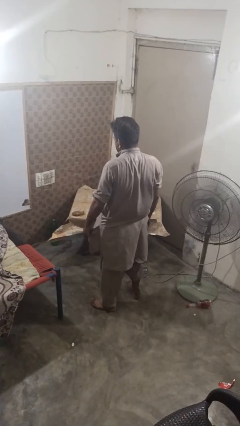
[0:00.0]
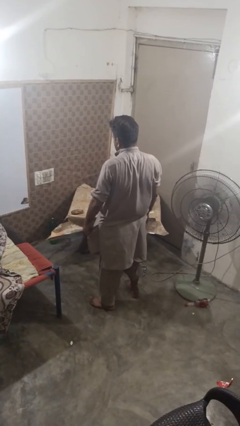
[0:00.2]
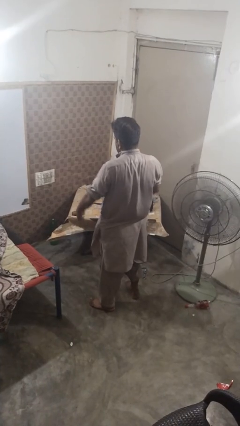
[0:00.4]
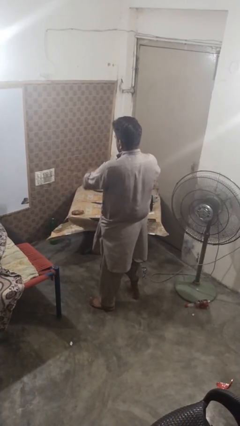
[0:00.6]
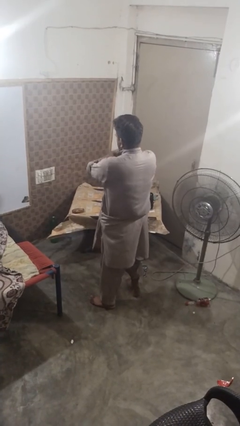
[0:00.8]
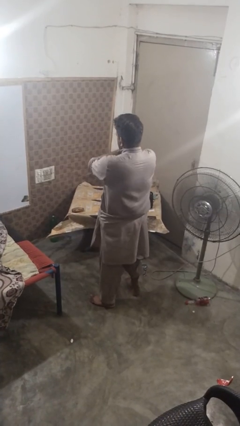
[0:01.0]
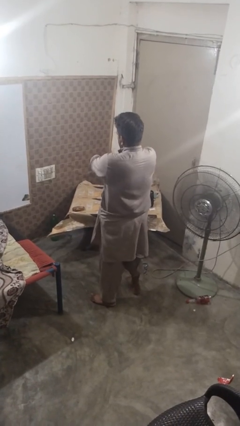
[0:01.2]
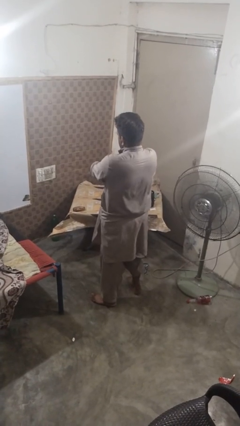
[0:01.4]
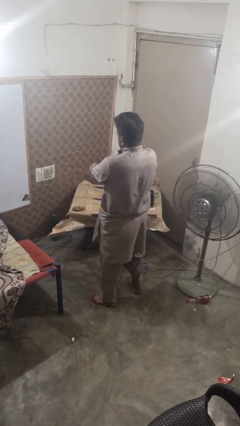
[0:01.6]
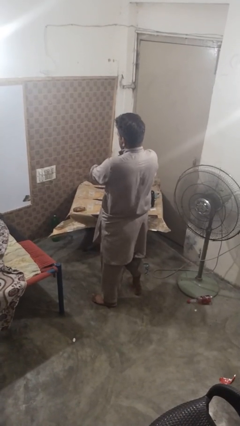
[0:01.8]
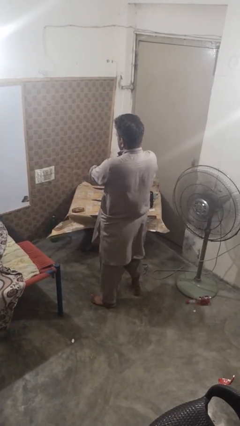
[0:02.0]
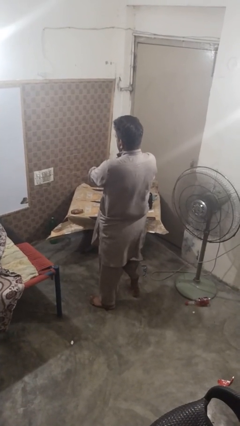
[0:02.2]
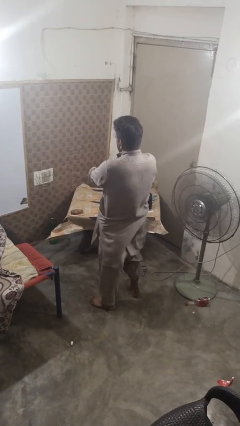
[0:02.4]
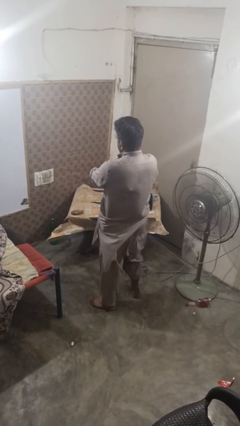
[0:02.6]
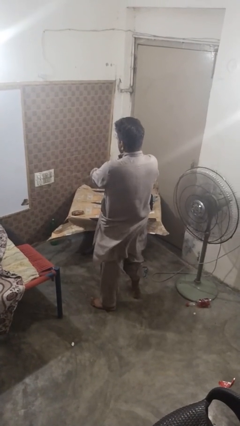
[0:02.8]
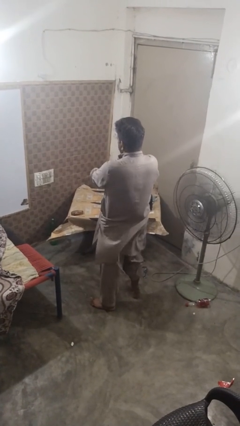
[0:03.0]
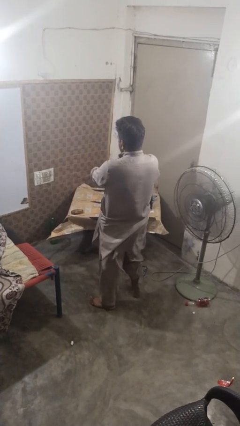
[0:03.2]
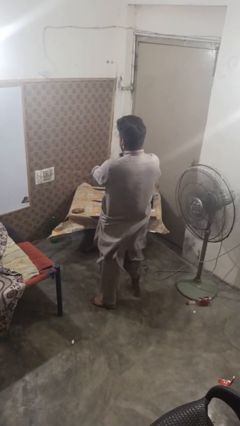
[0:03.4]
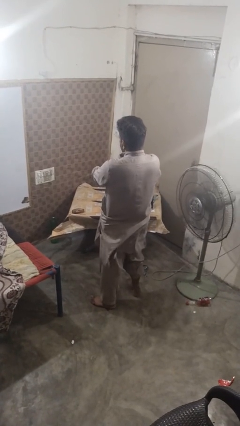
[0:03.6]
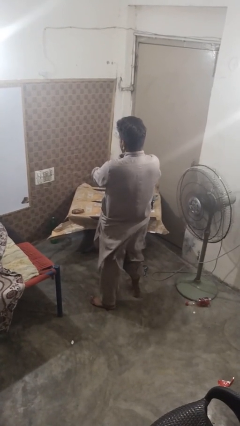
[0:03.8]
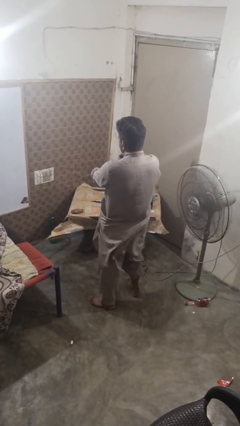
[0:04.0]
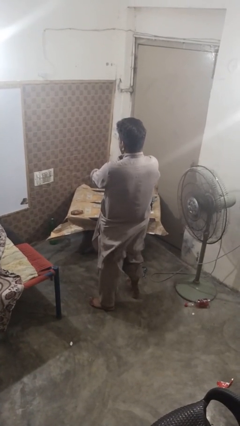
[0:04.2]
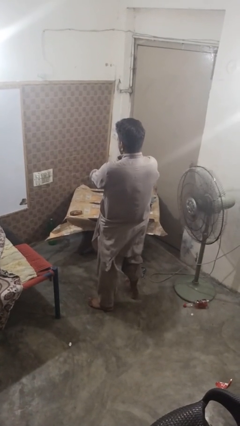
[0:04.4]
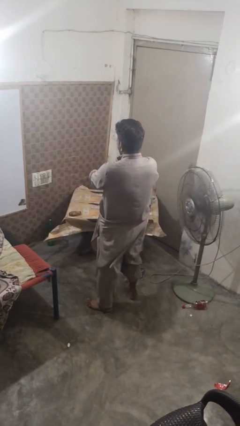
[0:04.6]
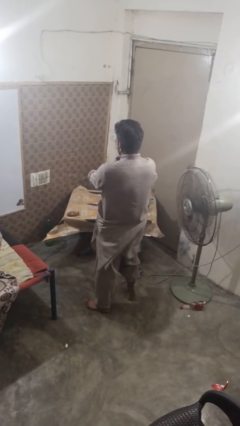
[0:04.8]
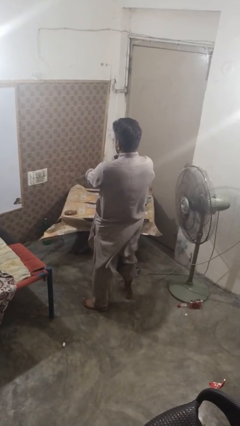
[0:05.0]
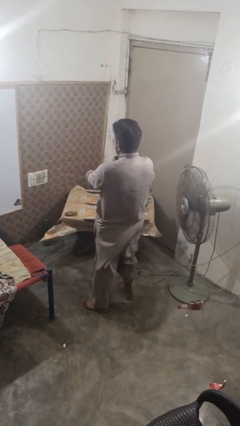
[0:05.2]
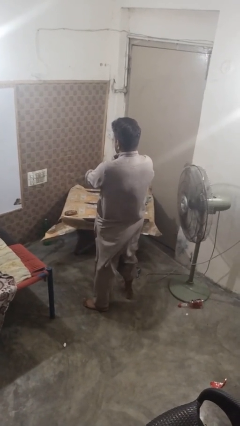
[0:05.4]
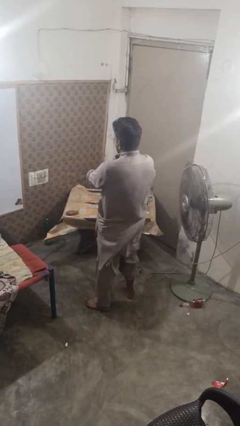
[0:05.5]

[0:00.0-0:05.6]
person crosses arms

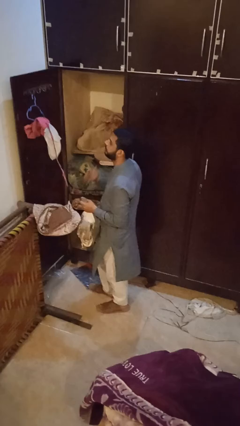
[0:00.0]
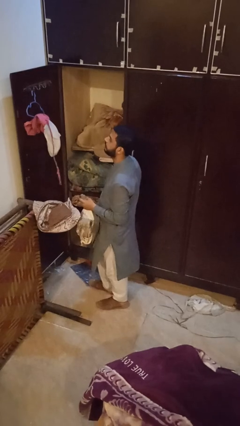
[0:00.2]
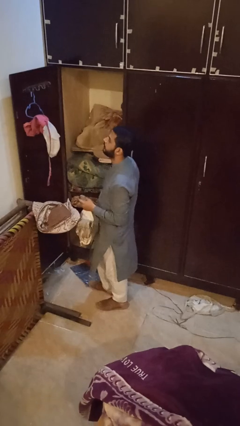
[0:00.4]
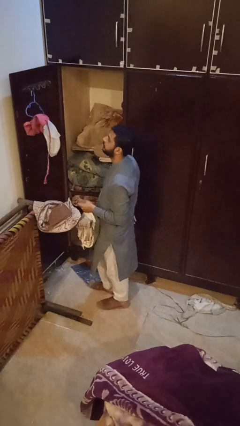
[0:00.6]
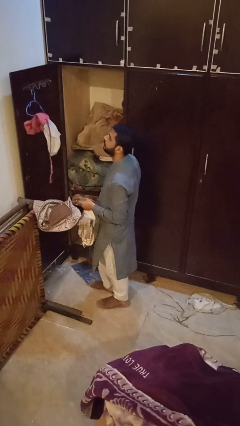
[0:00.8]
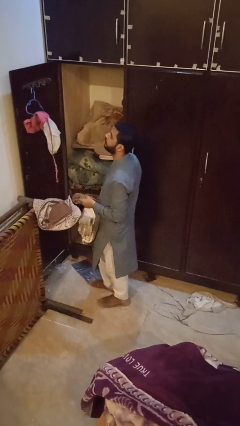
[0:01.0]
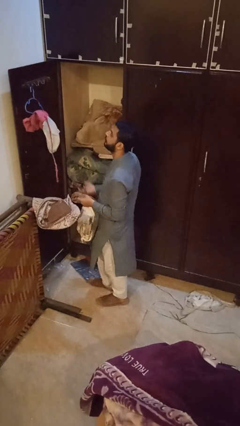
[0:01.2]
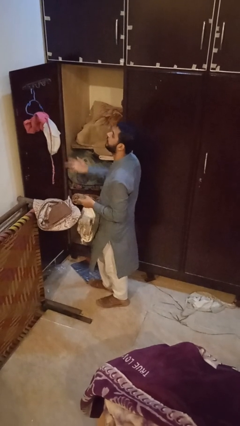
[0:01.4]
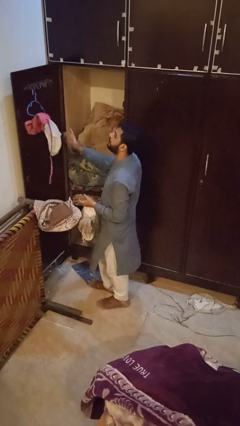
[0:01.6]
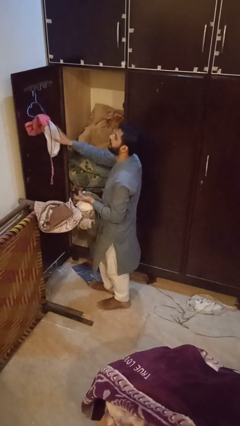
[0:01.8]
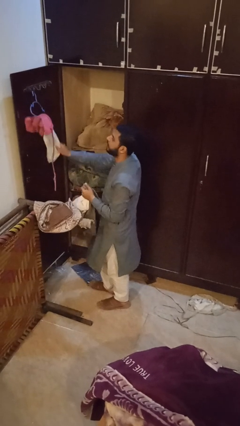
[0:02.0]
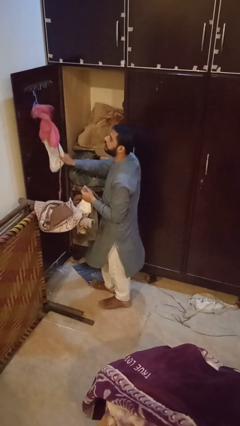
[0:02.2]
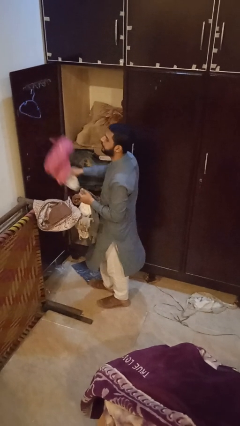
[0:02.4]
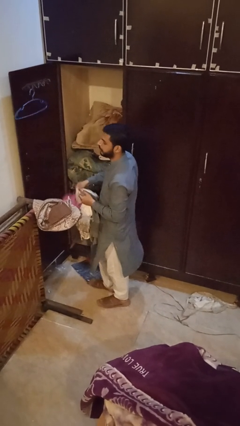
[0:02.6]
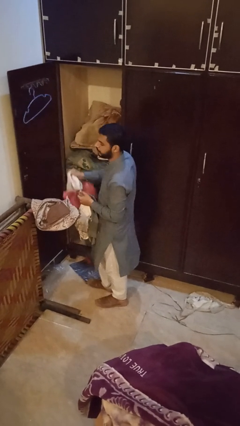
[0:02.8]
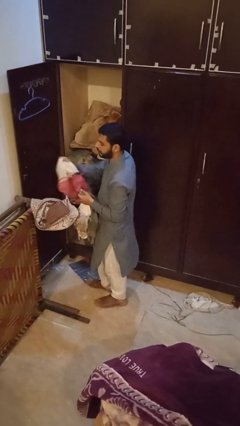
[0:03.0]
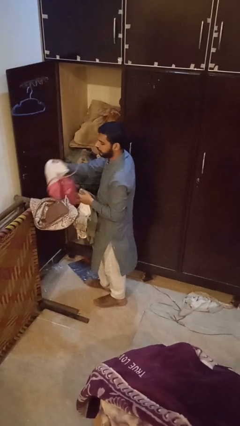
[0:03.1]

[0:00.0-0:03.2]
person takes clothes from closet

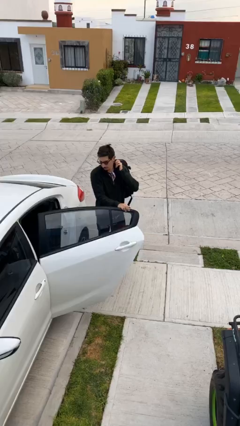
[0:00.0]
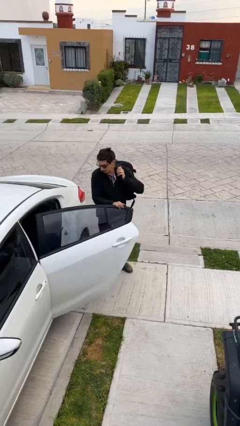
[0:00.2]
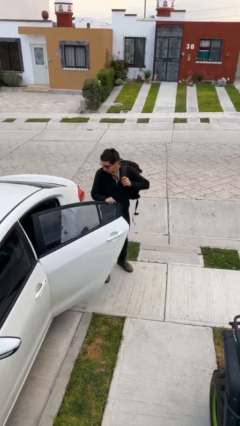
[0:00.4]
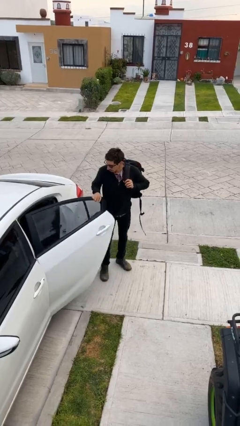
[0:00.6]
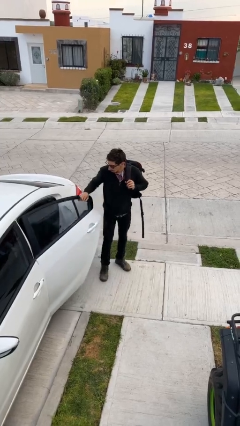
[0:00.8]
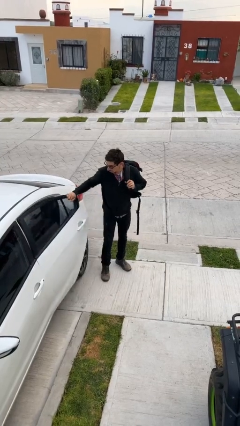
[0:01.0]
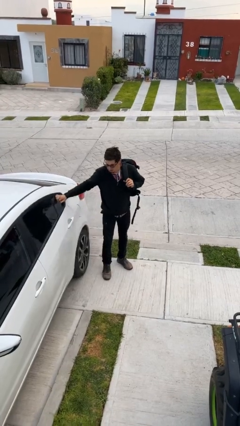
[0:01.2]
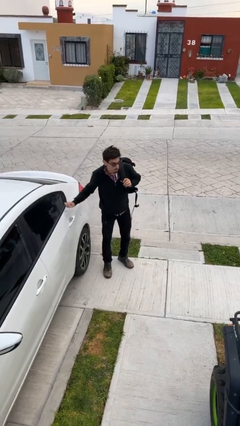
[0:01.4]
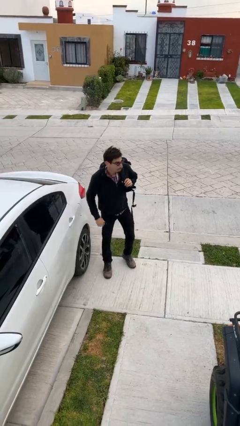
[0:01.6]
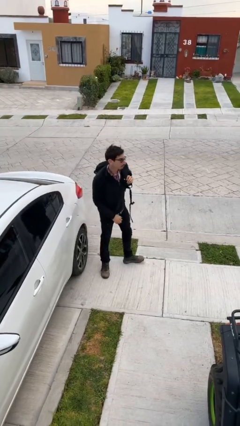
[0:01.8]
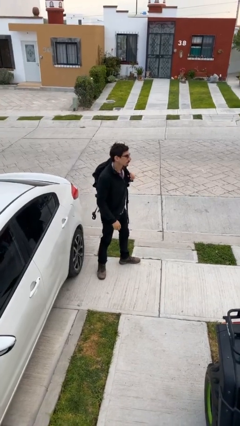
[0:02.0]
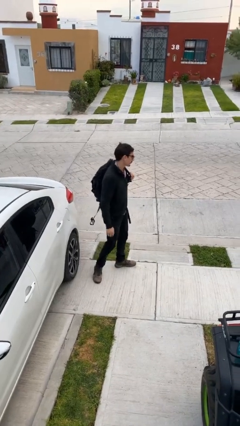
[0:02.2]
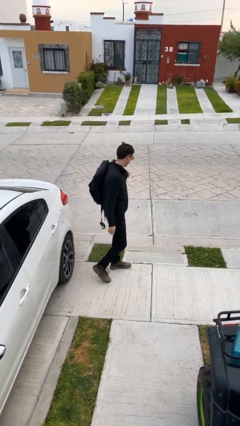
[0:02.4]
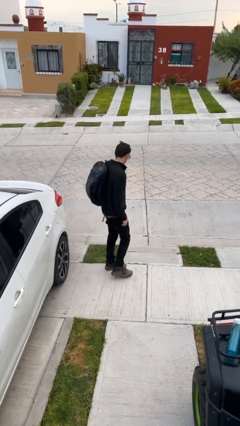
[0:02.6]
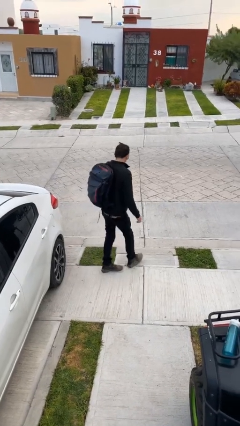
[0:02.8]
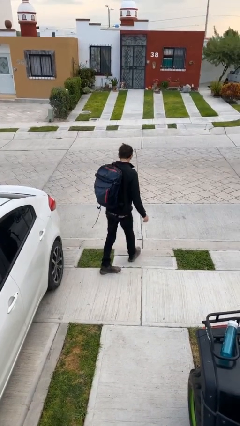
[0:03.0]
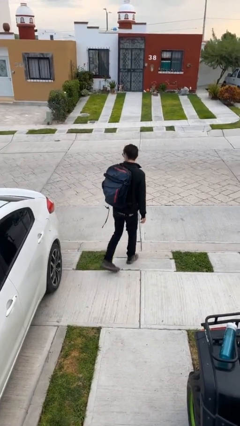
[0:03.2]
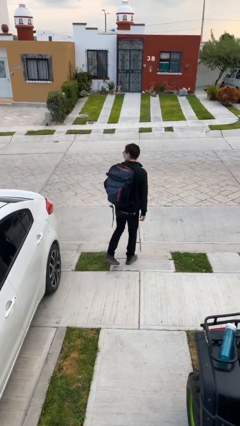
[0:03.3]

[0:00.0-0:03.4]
person closes car door

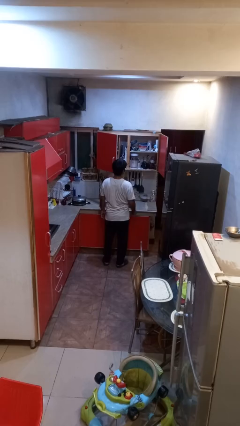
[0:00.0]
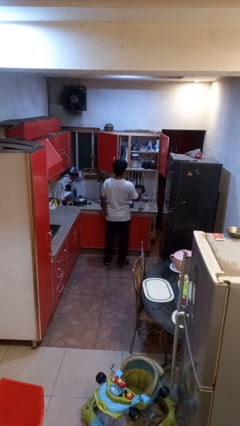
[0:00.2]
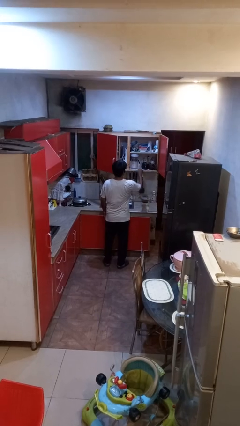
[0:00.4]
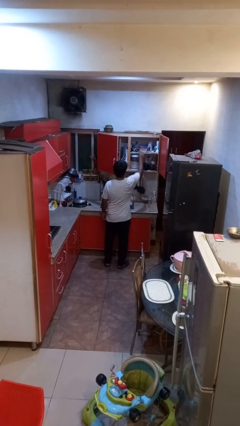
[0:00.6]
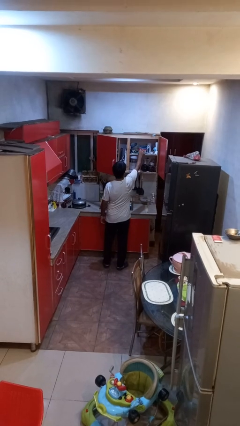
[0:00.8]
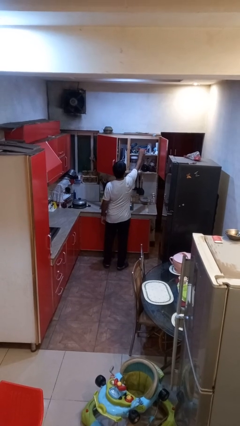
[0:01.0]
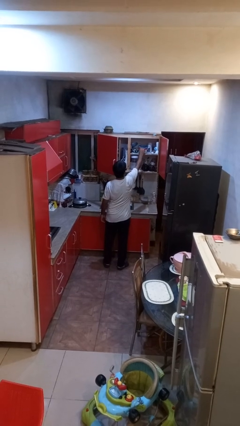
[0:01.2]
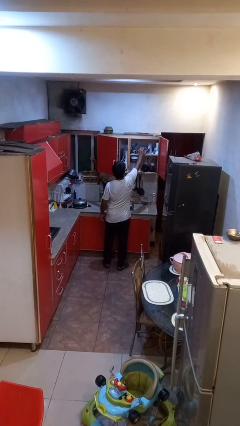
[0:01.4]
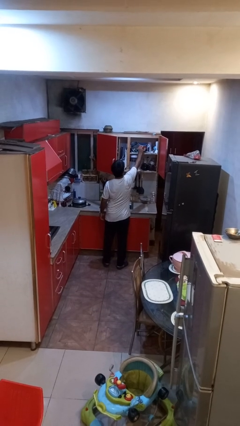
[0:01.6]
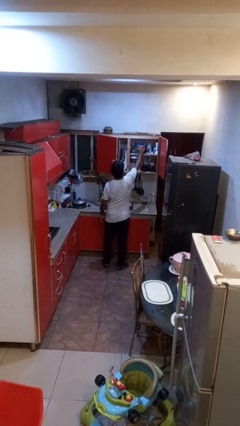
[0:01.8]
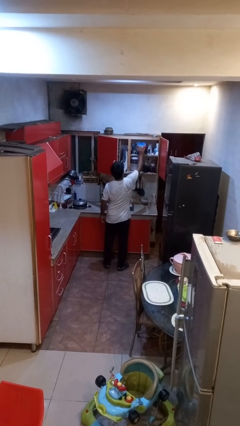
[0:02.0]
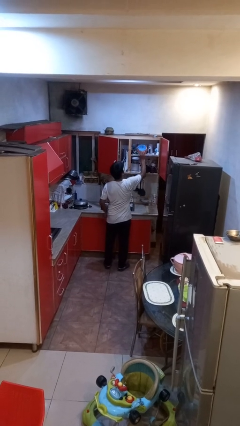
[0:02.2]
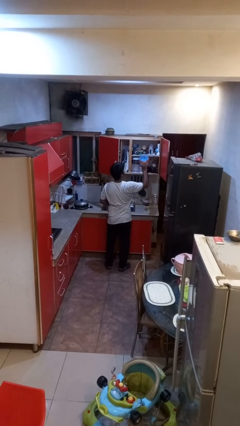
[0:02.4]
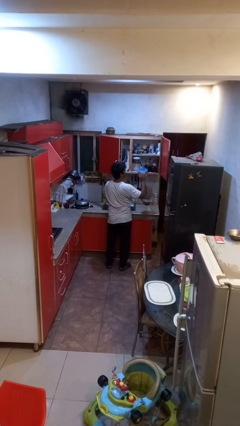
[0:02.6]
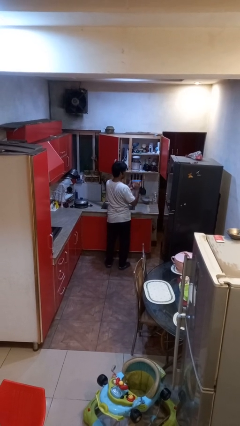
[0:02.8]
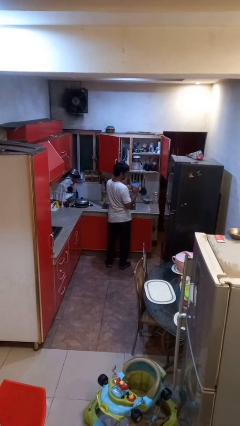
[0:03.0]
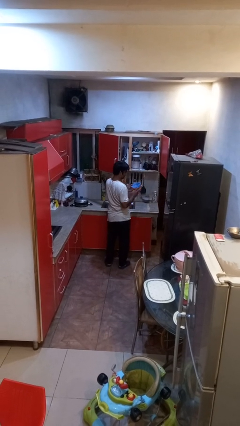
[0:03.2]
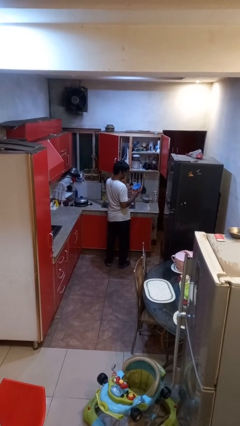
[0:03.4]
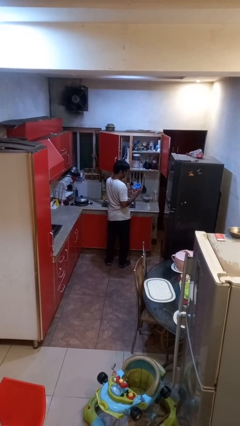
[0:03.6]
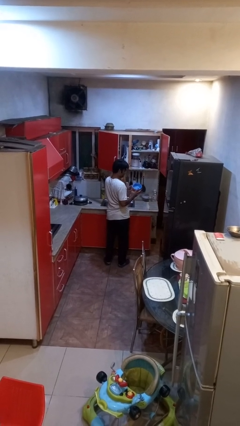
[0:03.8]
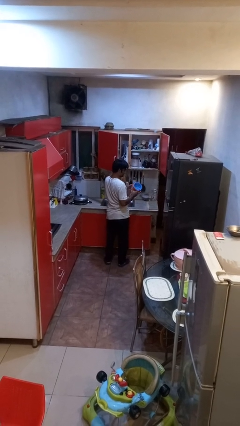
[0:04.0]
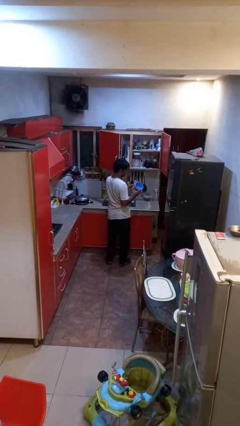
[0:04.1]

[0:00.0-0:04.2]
person picks up object from cabinet

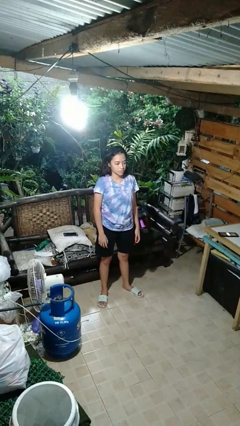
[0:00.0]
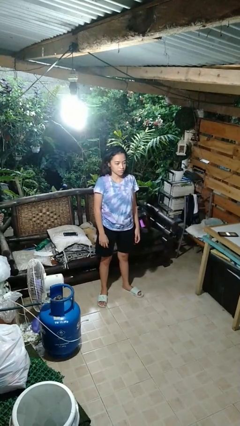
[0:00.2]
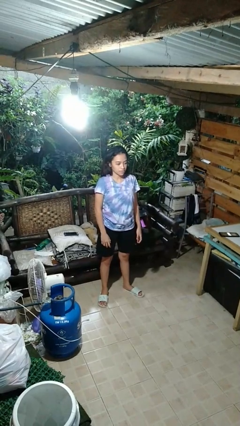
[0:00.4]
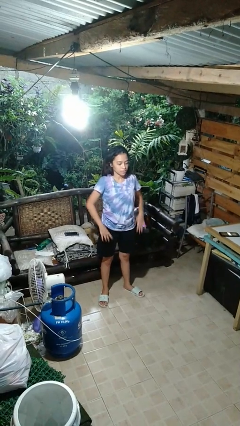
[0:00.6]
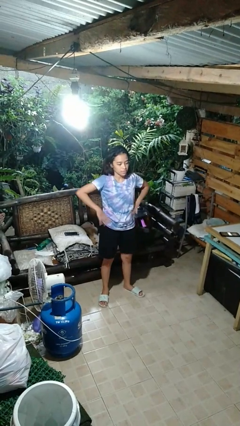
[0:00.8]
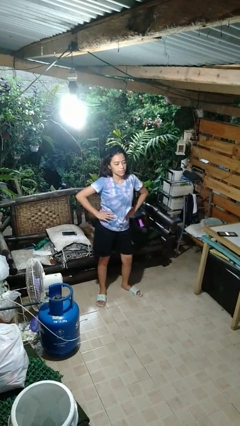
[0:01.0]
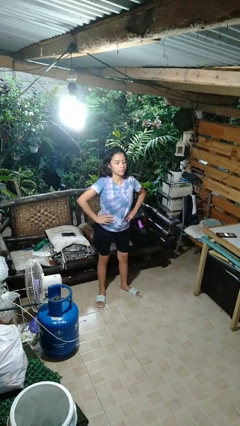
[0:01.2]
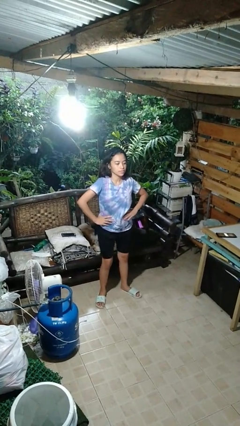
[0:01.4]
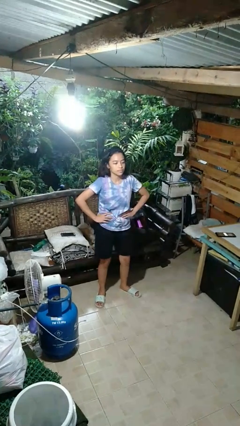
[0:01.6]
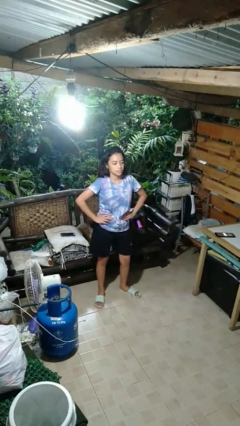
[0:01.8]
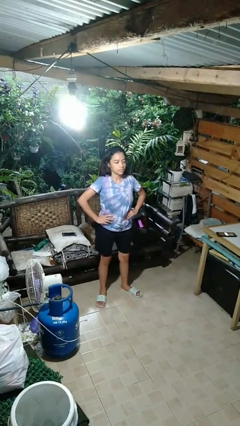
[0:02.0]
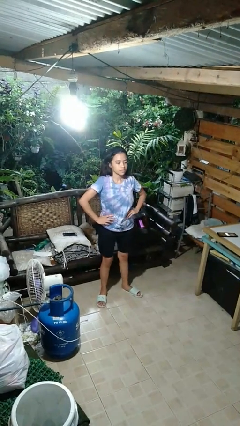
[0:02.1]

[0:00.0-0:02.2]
person wiggles hips
